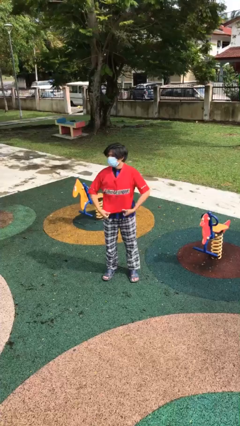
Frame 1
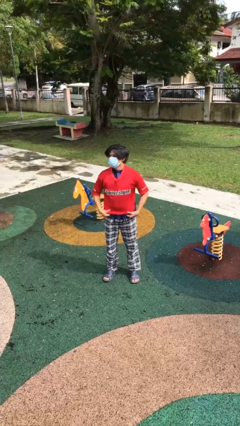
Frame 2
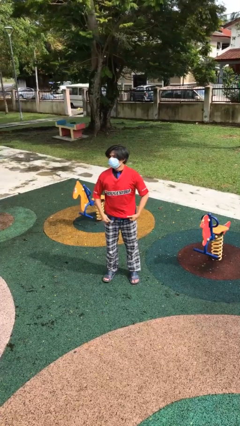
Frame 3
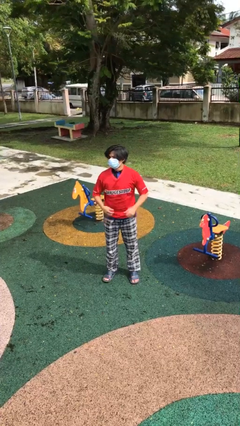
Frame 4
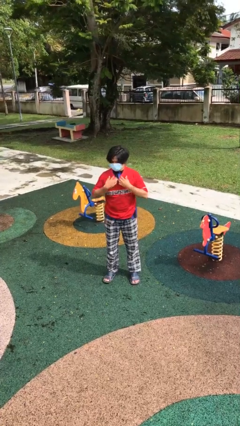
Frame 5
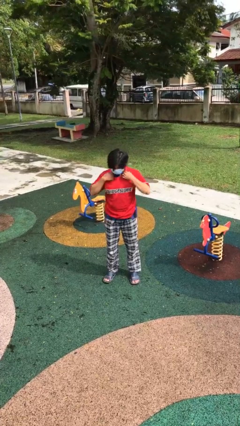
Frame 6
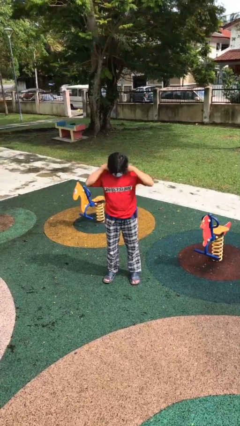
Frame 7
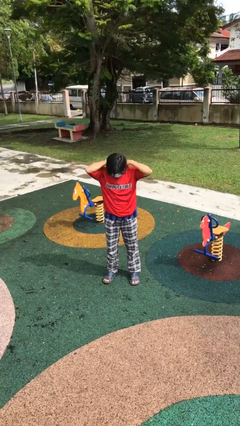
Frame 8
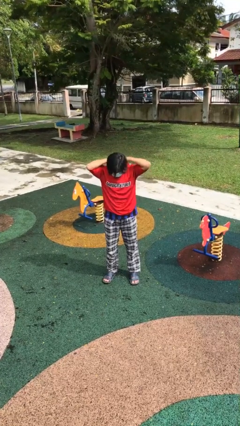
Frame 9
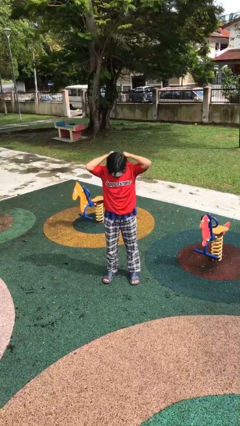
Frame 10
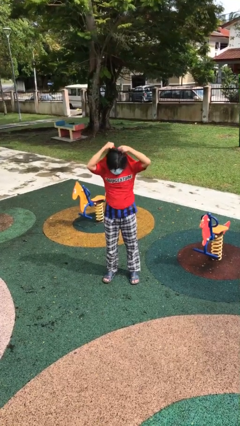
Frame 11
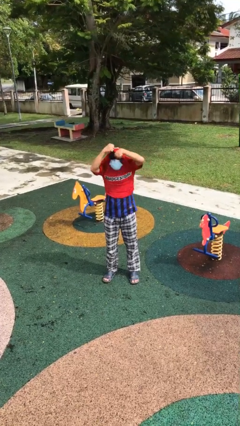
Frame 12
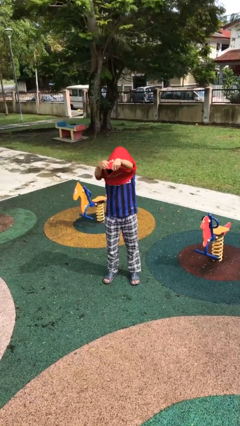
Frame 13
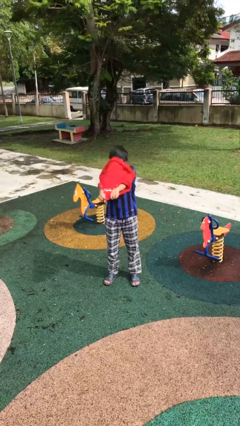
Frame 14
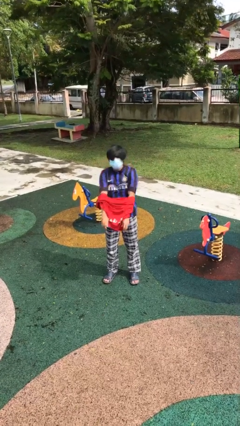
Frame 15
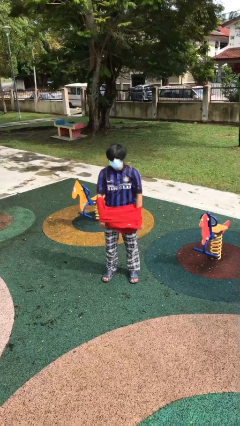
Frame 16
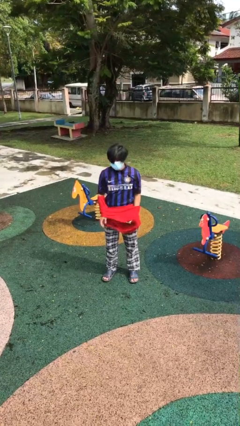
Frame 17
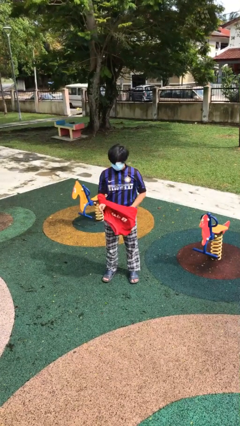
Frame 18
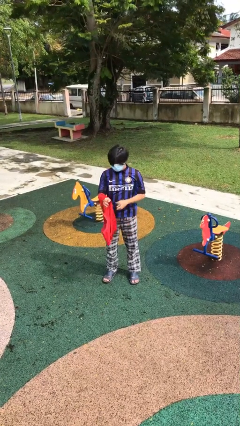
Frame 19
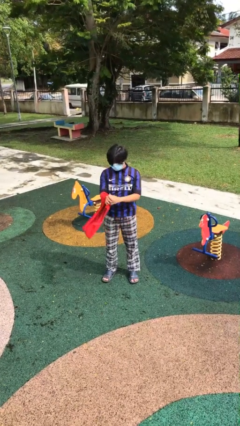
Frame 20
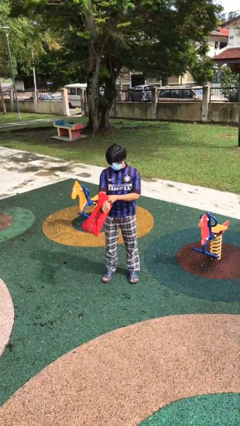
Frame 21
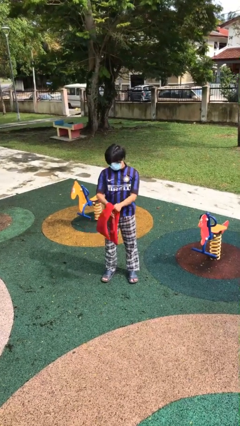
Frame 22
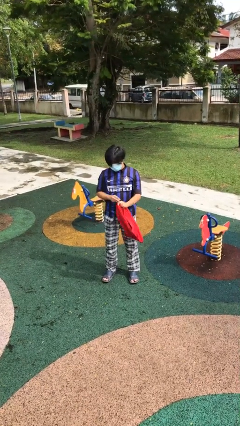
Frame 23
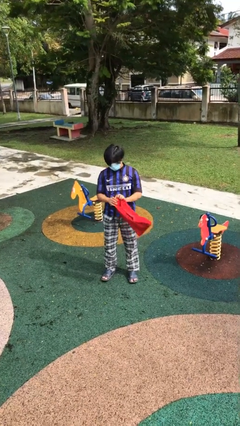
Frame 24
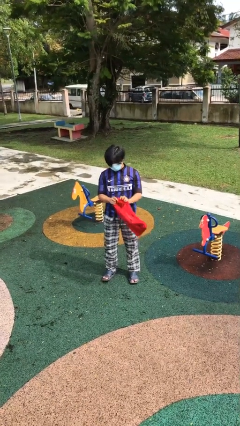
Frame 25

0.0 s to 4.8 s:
person takes off shirt

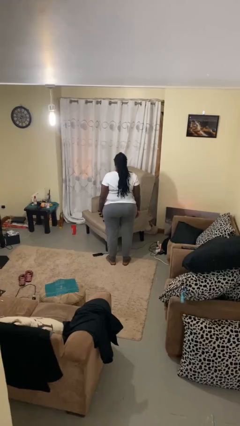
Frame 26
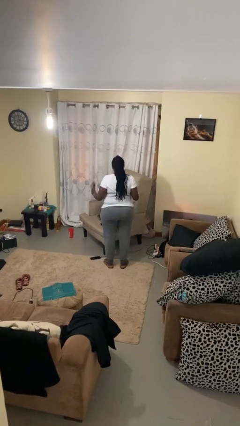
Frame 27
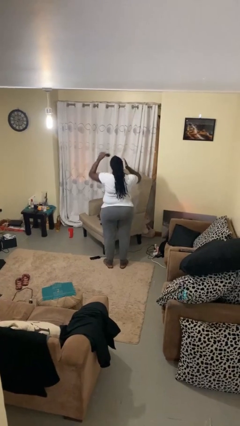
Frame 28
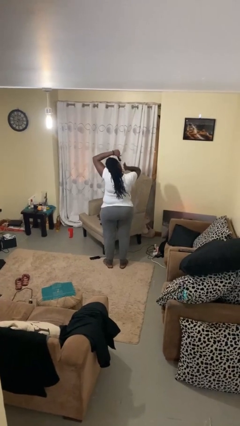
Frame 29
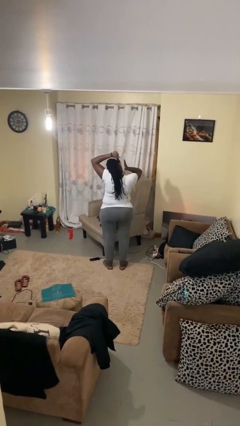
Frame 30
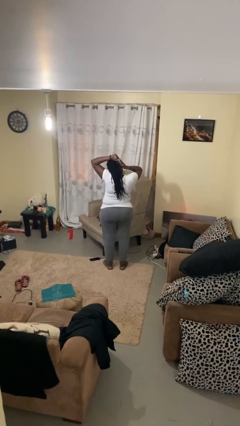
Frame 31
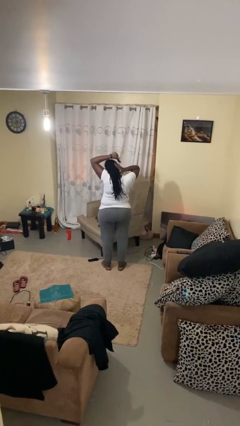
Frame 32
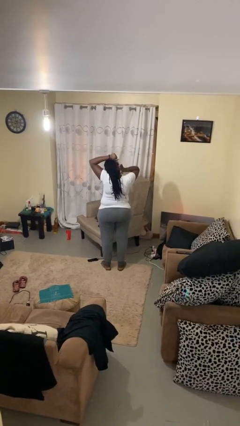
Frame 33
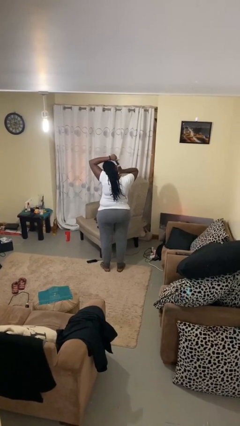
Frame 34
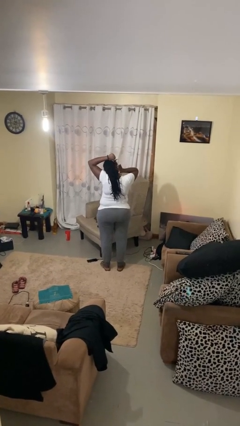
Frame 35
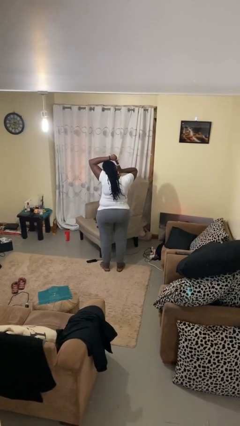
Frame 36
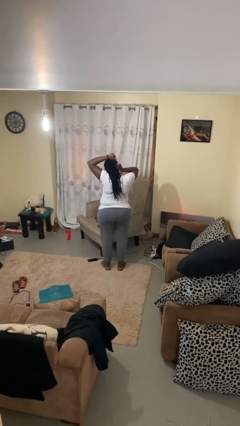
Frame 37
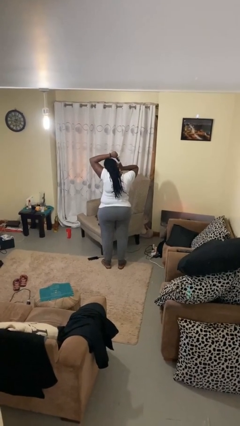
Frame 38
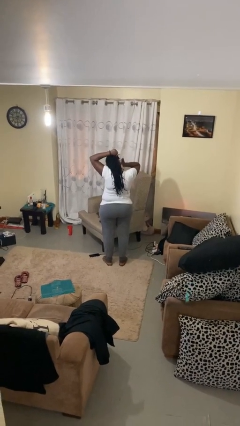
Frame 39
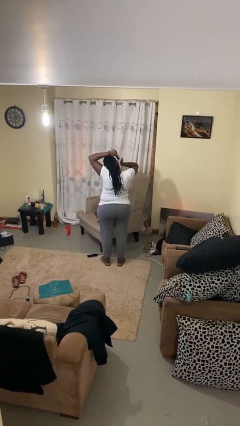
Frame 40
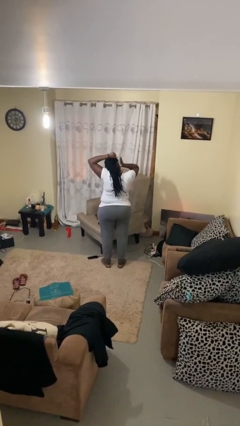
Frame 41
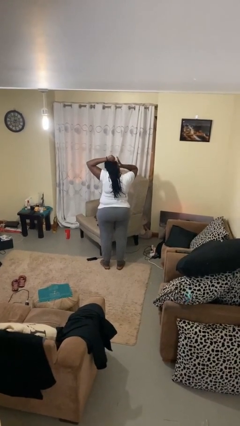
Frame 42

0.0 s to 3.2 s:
person brushes hair

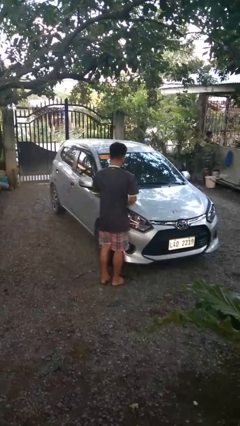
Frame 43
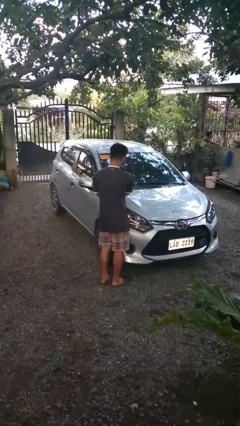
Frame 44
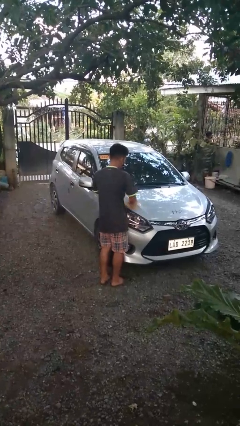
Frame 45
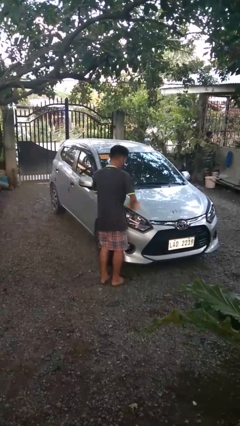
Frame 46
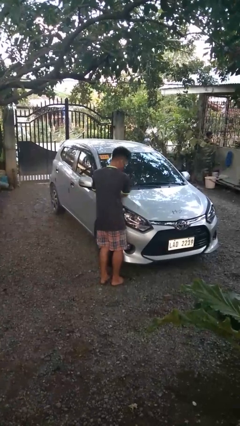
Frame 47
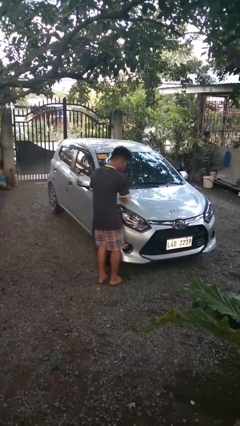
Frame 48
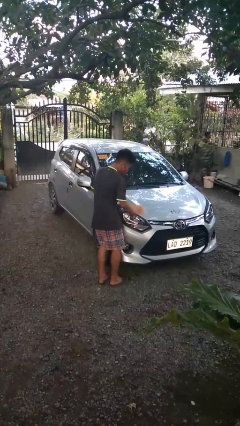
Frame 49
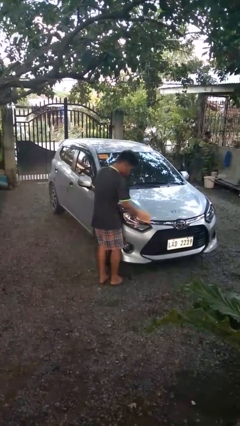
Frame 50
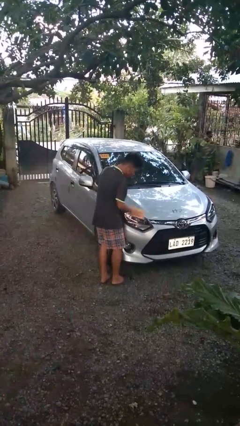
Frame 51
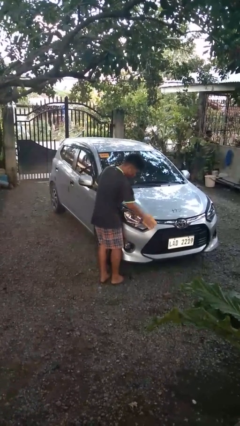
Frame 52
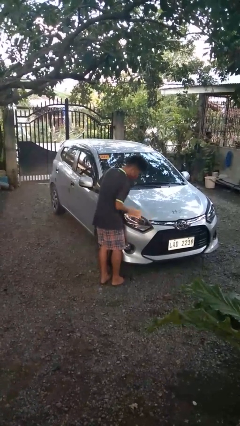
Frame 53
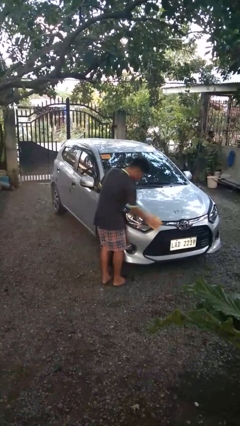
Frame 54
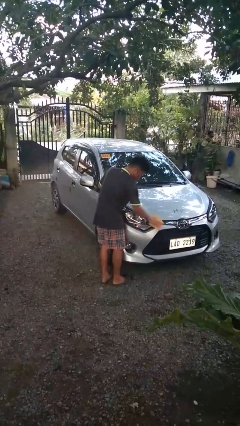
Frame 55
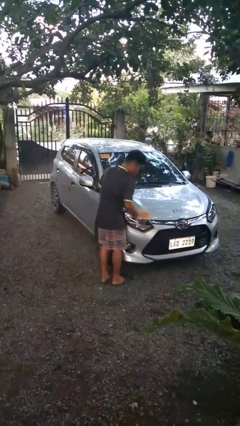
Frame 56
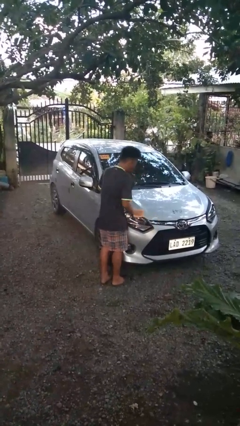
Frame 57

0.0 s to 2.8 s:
person polishes car with rag

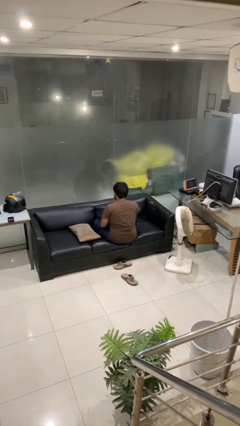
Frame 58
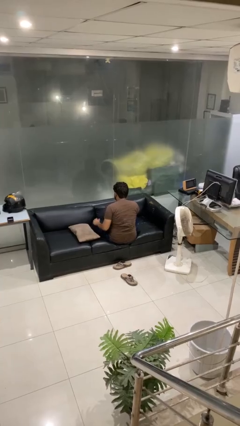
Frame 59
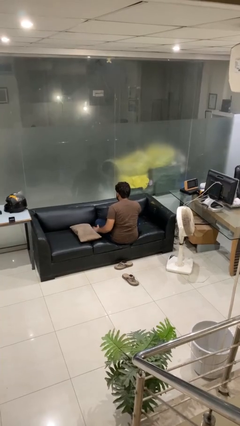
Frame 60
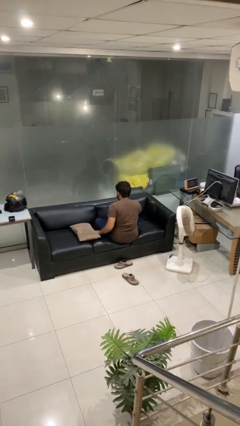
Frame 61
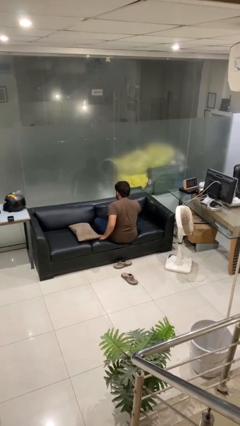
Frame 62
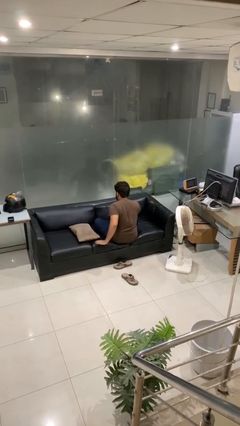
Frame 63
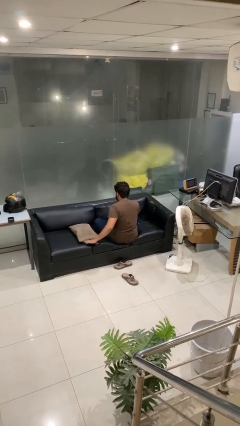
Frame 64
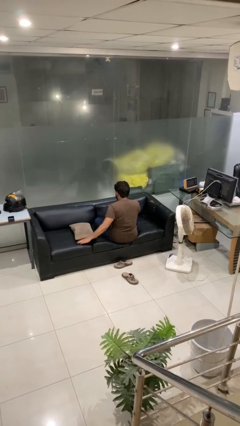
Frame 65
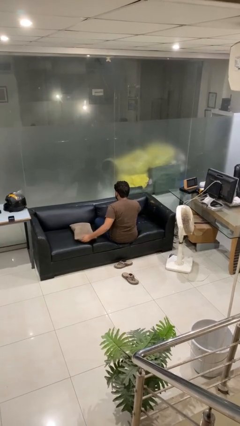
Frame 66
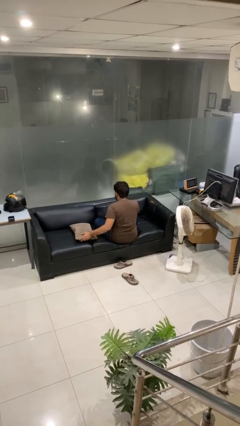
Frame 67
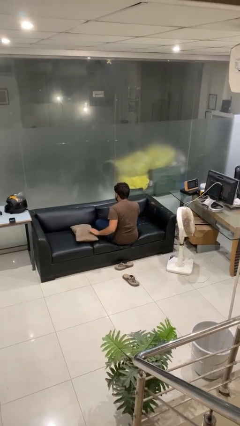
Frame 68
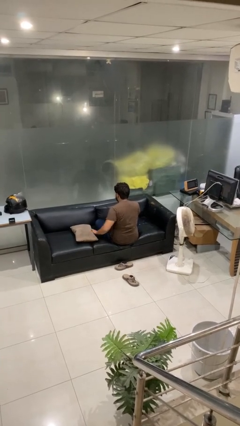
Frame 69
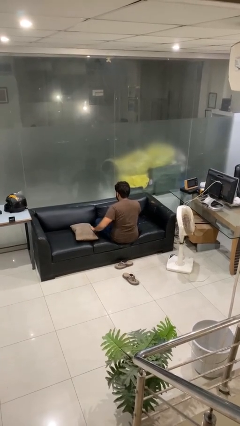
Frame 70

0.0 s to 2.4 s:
person searches in couch

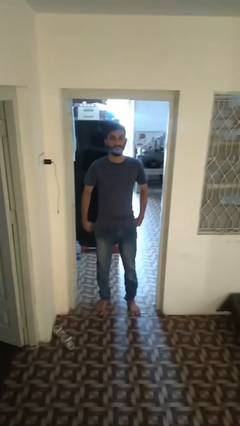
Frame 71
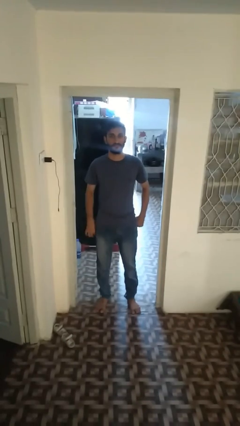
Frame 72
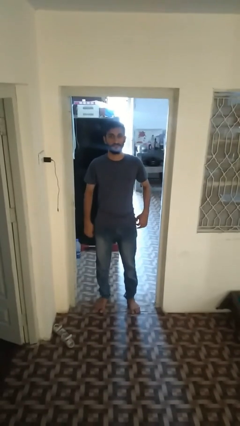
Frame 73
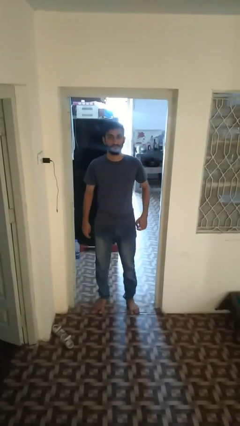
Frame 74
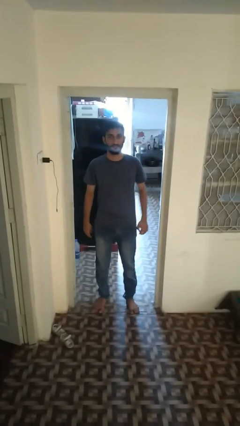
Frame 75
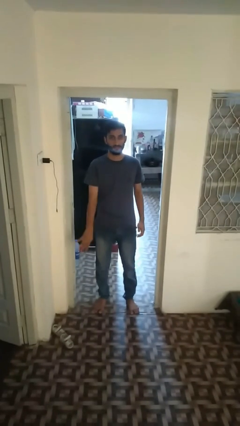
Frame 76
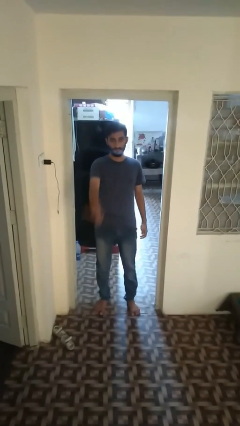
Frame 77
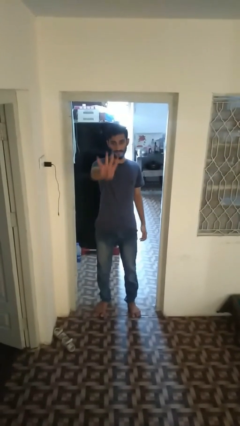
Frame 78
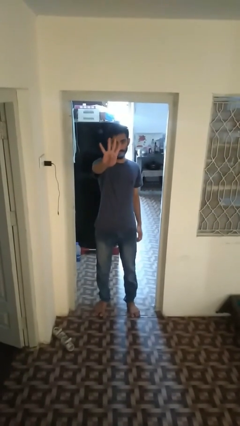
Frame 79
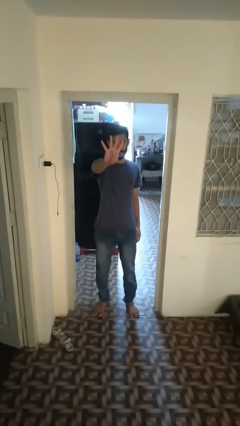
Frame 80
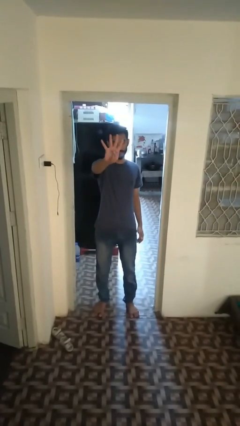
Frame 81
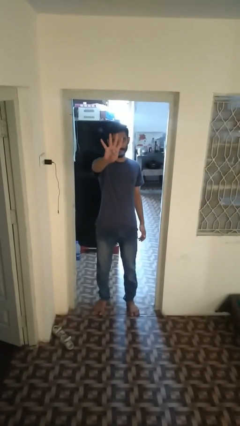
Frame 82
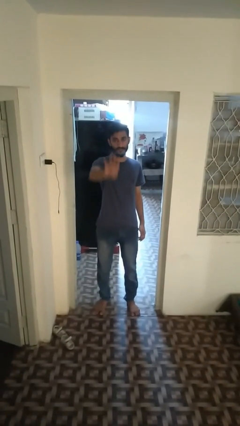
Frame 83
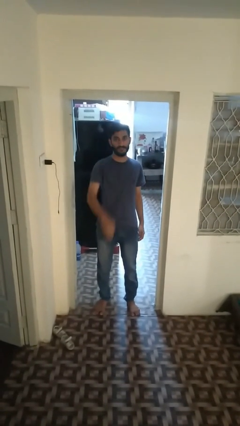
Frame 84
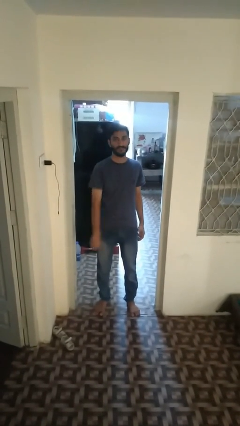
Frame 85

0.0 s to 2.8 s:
person gestures number four

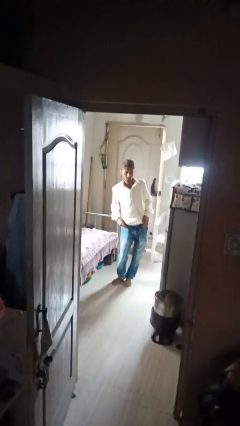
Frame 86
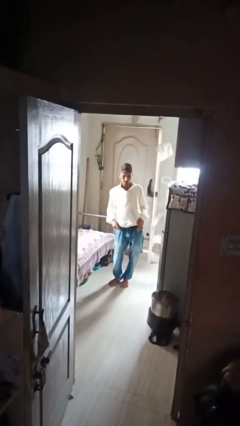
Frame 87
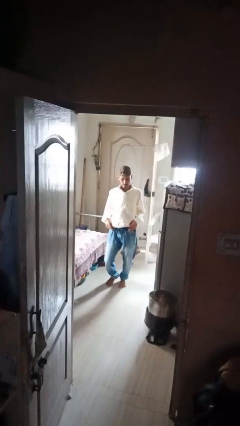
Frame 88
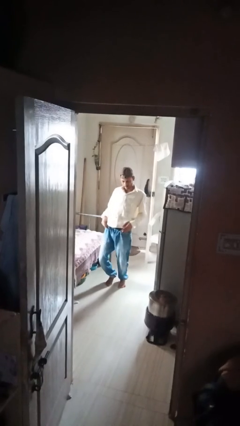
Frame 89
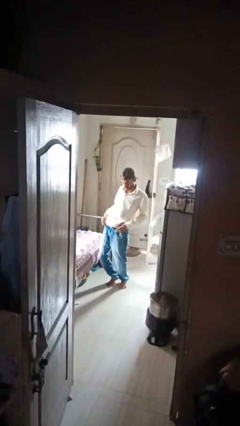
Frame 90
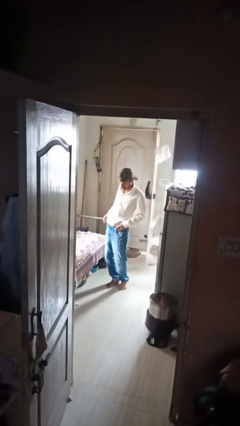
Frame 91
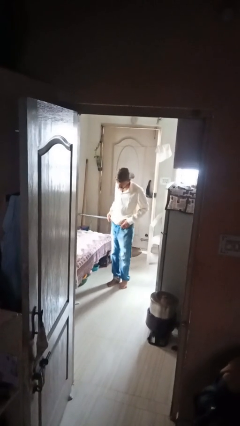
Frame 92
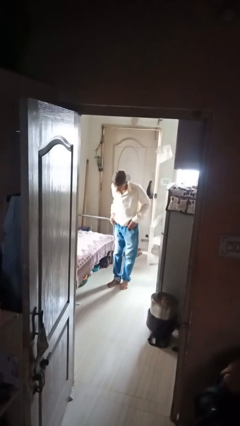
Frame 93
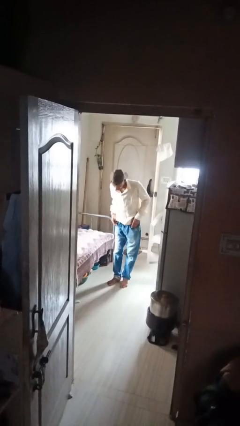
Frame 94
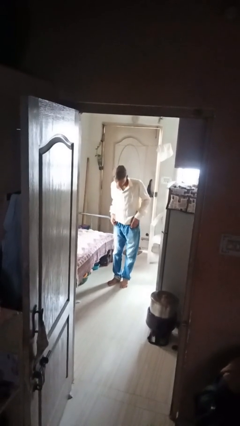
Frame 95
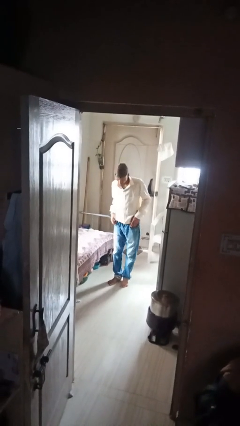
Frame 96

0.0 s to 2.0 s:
person wiggles hips
